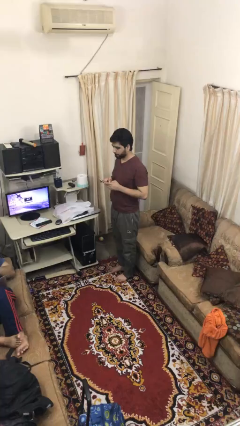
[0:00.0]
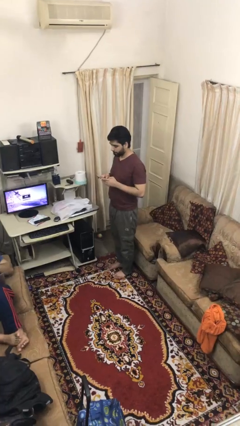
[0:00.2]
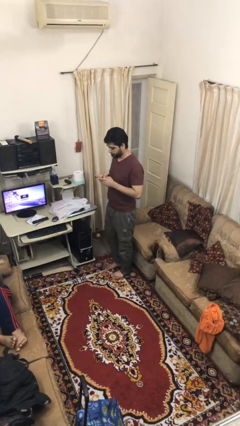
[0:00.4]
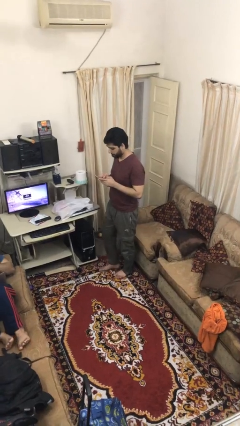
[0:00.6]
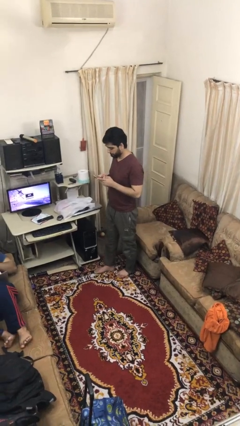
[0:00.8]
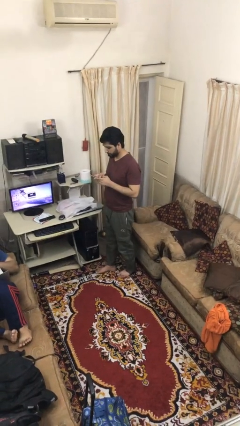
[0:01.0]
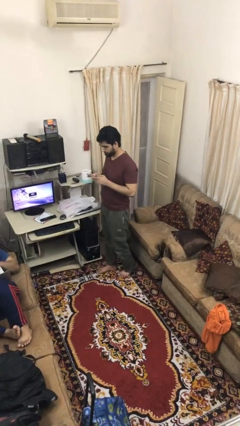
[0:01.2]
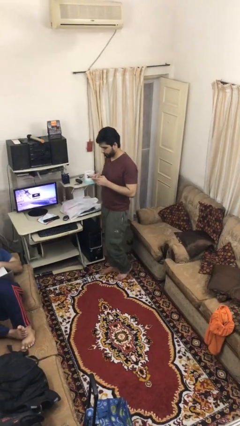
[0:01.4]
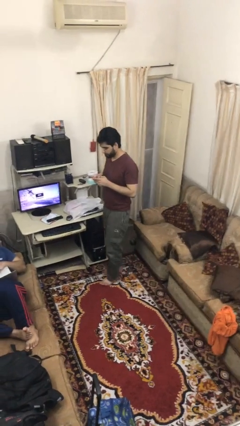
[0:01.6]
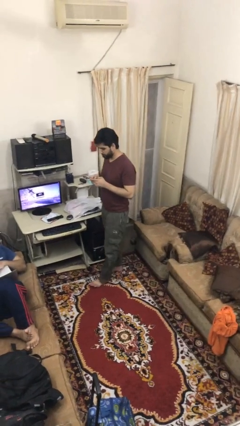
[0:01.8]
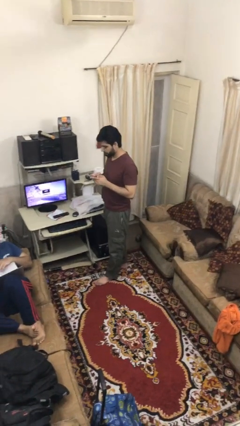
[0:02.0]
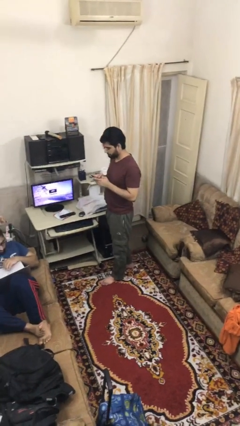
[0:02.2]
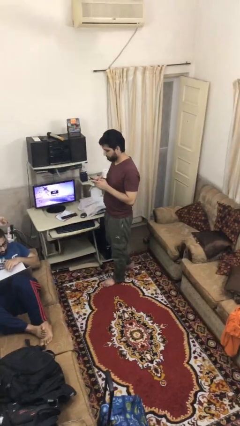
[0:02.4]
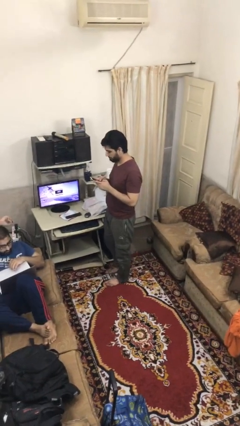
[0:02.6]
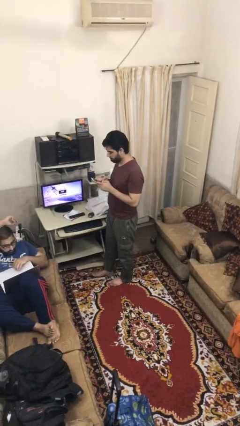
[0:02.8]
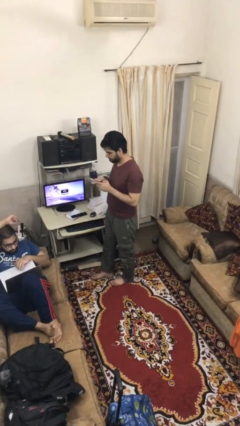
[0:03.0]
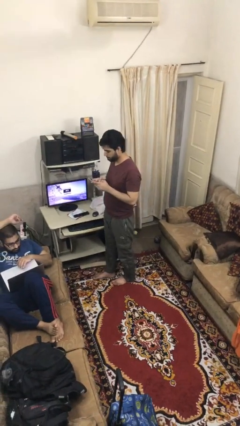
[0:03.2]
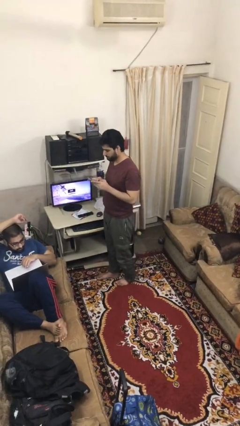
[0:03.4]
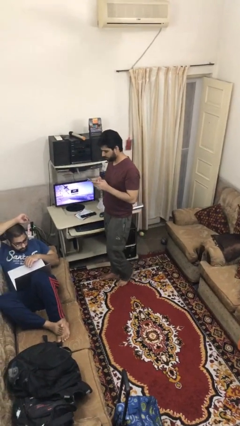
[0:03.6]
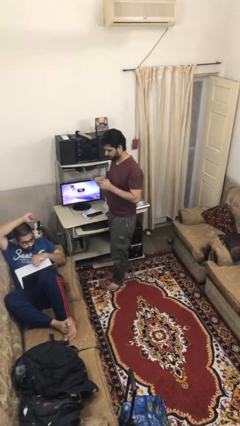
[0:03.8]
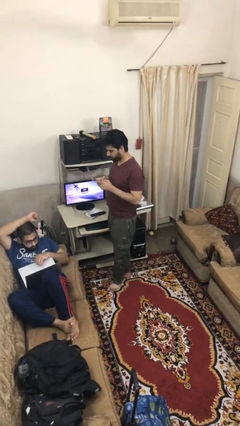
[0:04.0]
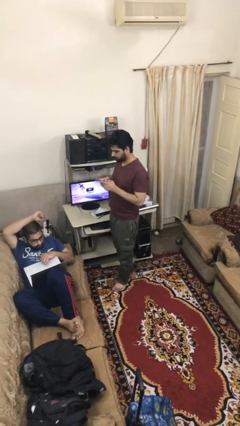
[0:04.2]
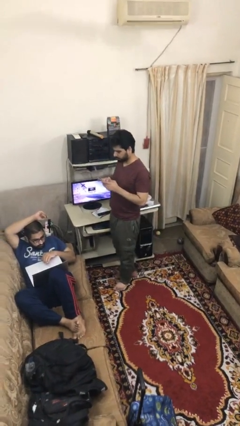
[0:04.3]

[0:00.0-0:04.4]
person texts on phone

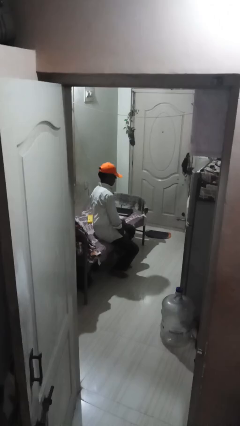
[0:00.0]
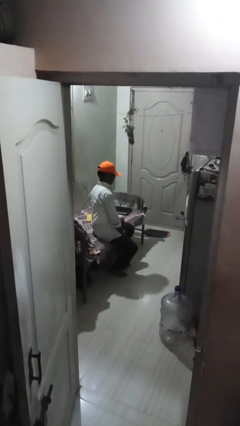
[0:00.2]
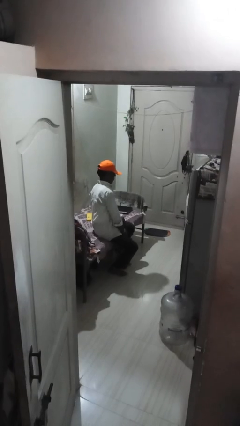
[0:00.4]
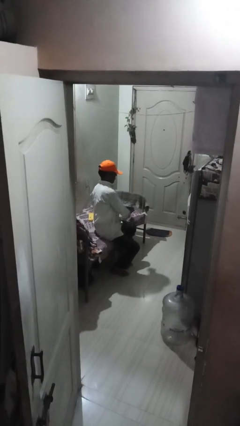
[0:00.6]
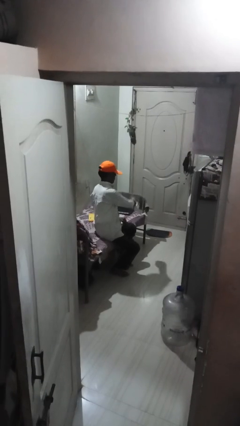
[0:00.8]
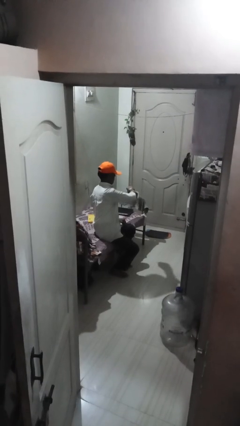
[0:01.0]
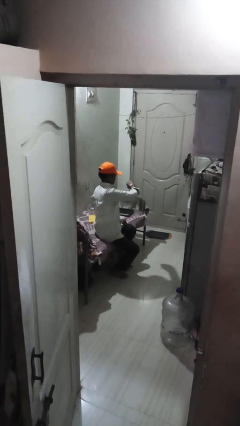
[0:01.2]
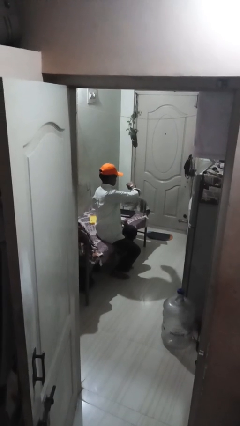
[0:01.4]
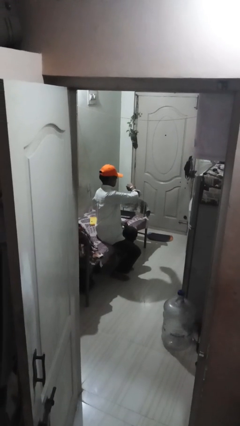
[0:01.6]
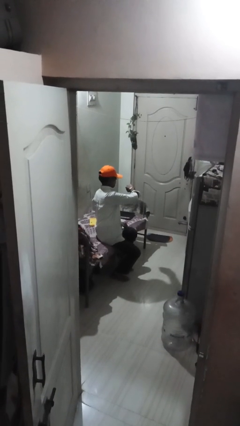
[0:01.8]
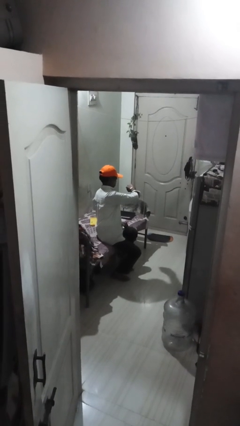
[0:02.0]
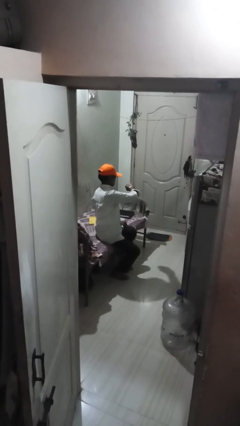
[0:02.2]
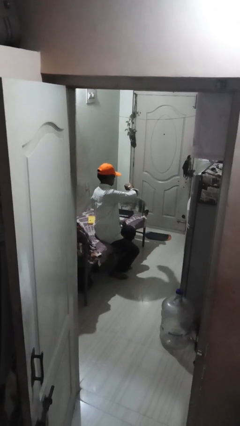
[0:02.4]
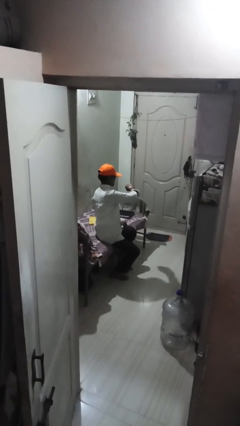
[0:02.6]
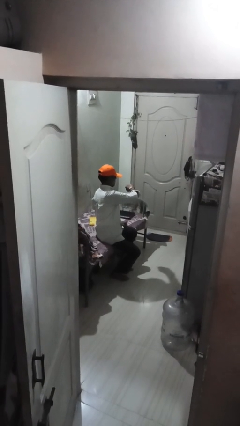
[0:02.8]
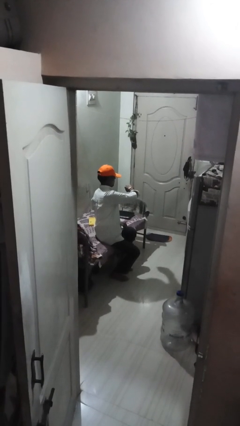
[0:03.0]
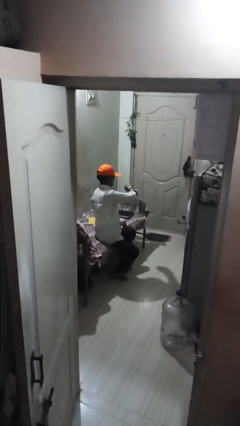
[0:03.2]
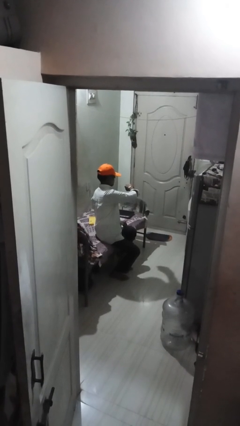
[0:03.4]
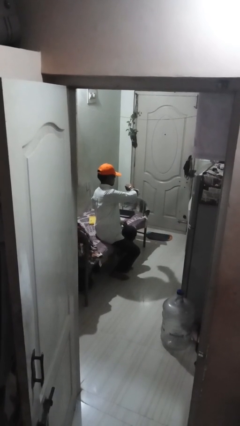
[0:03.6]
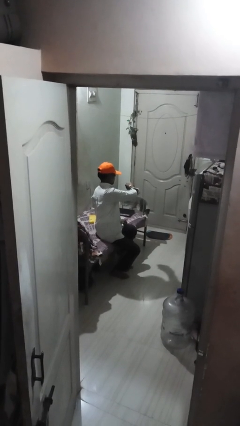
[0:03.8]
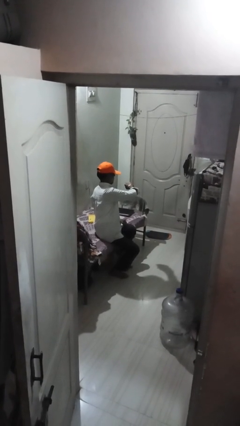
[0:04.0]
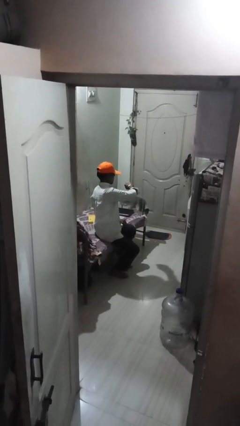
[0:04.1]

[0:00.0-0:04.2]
person looks at wristwatch

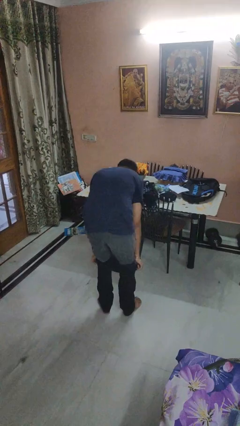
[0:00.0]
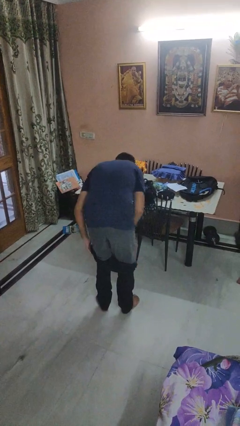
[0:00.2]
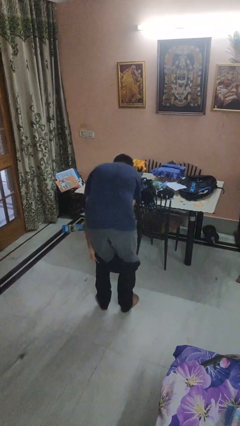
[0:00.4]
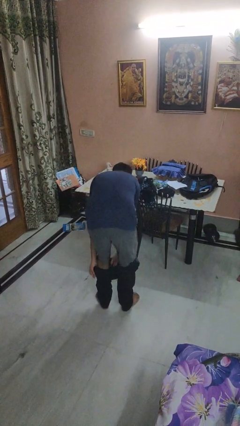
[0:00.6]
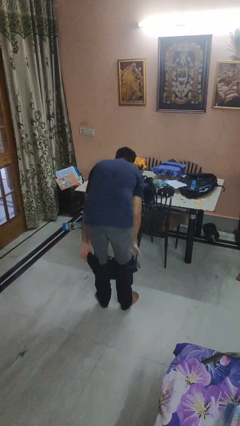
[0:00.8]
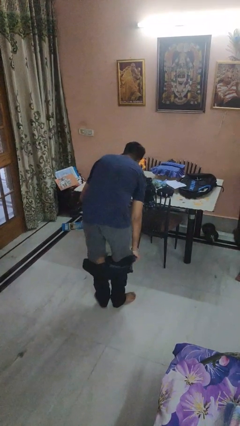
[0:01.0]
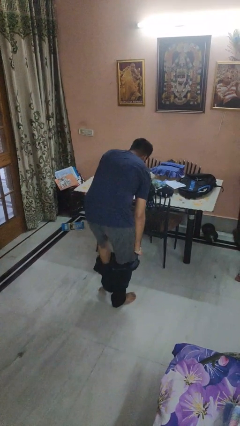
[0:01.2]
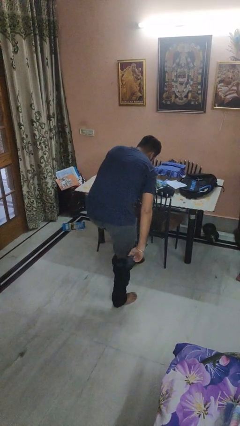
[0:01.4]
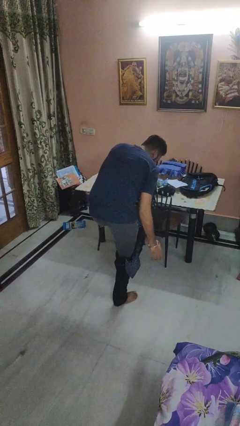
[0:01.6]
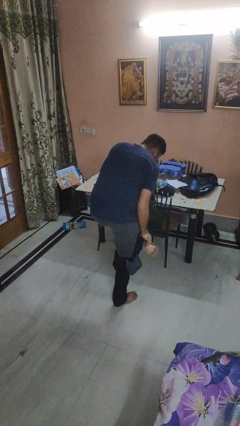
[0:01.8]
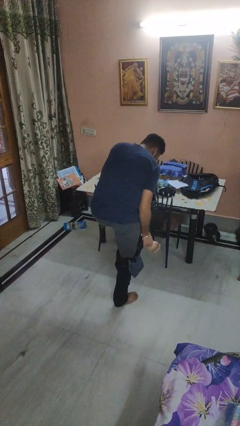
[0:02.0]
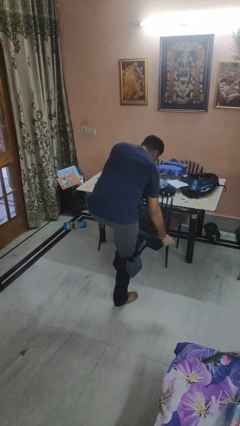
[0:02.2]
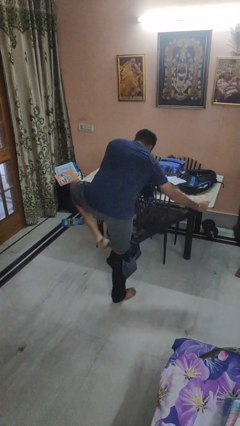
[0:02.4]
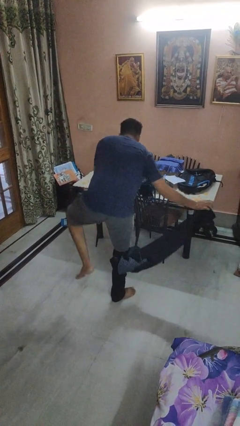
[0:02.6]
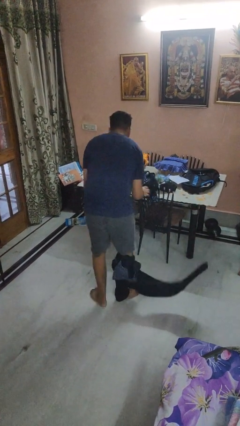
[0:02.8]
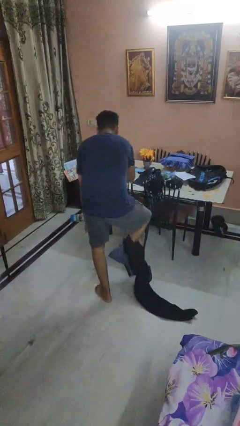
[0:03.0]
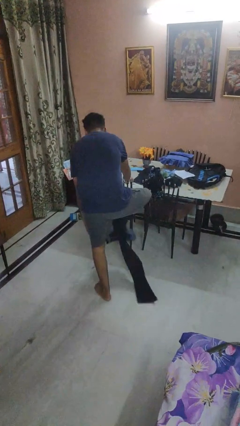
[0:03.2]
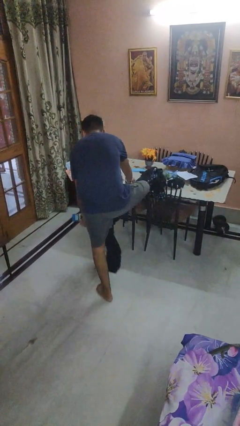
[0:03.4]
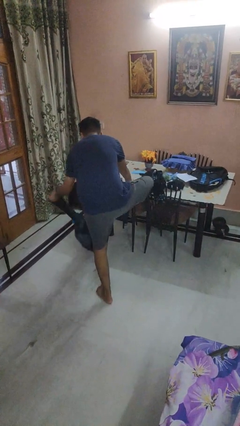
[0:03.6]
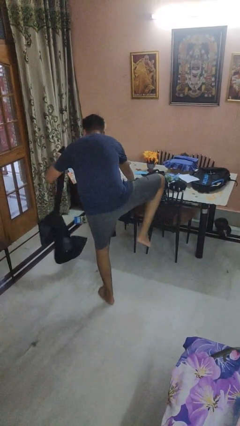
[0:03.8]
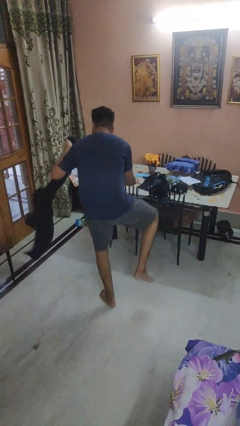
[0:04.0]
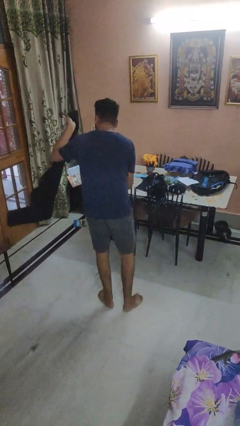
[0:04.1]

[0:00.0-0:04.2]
person takes off pants

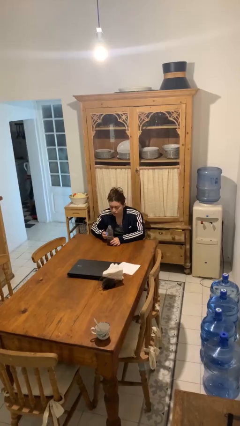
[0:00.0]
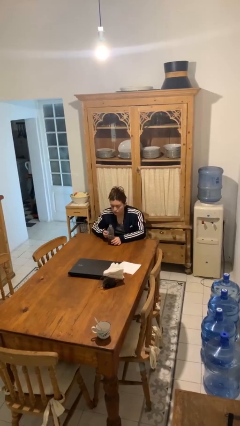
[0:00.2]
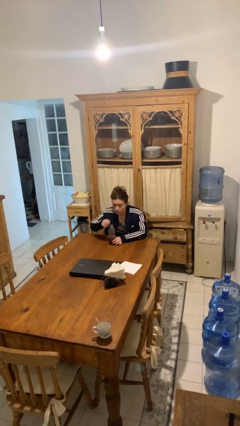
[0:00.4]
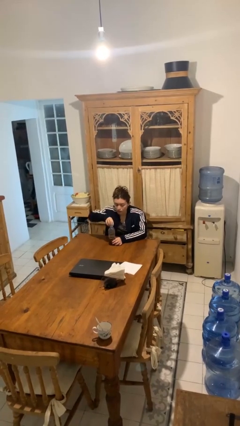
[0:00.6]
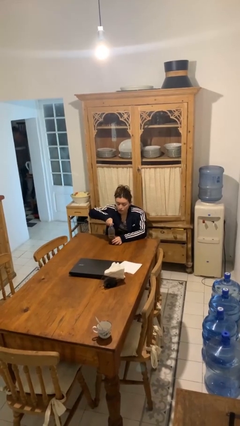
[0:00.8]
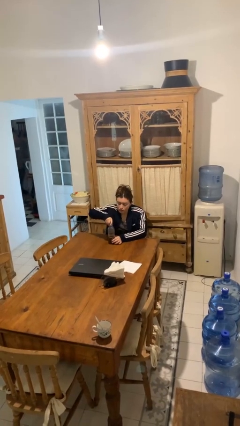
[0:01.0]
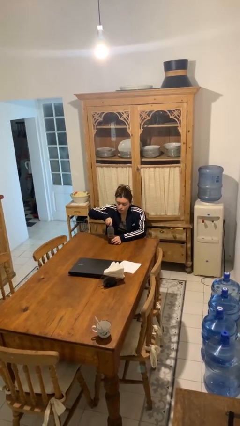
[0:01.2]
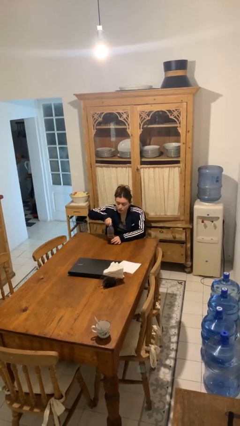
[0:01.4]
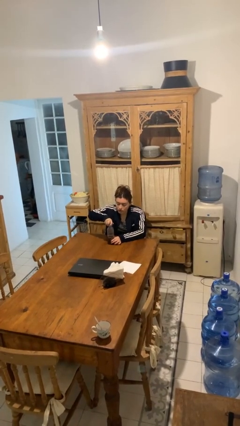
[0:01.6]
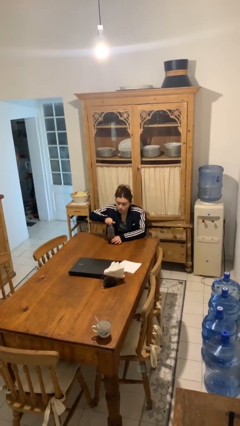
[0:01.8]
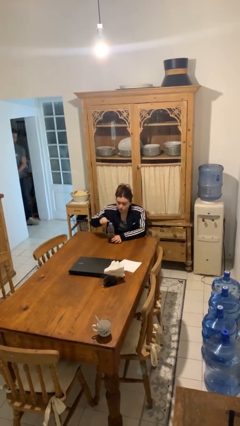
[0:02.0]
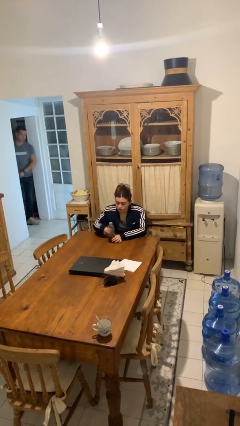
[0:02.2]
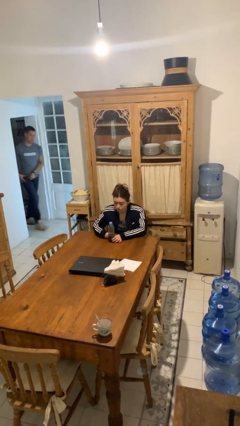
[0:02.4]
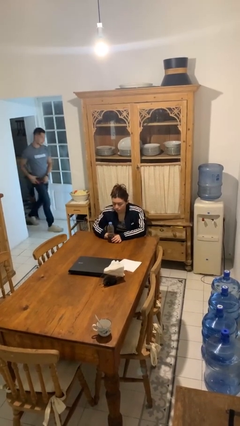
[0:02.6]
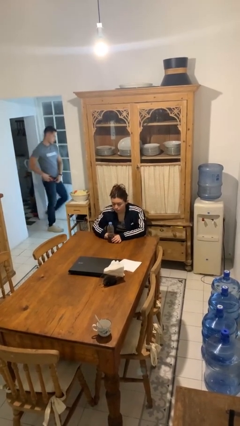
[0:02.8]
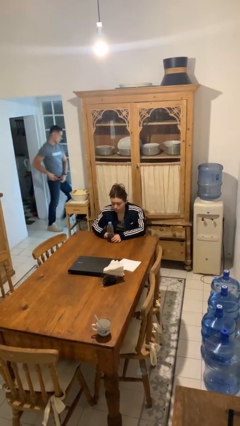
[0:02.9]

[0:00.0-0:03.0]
person screws lid to bottle

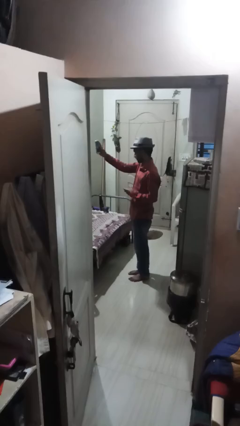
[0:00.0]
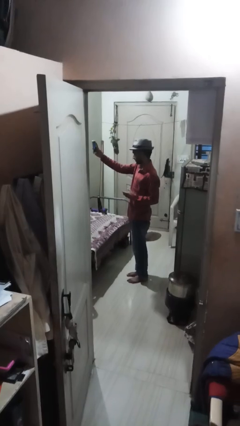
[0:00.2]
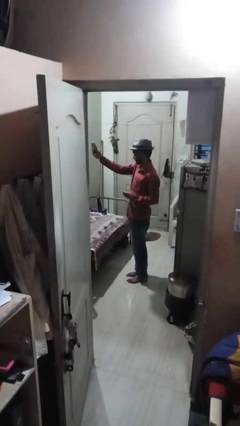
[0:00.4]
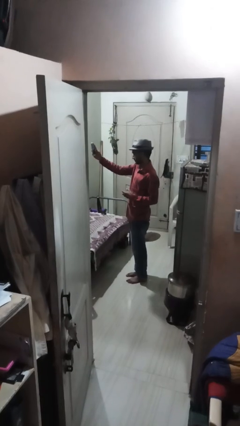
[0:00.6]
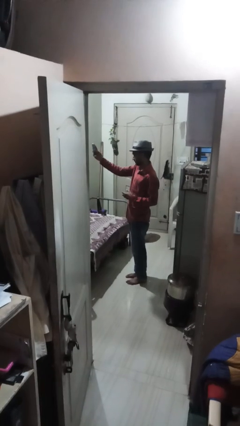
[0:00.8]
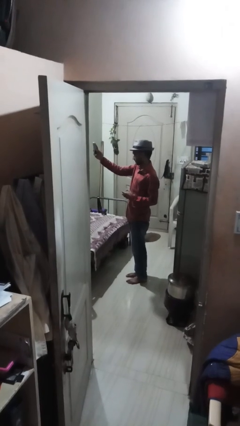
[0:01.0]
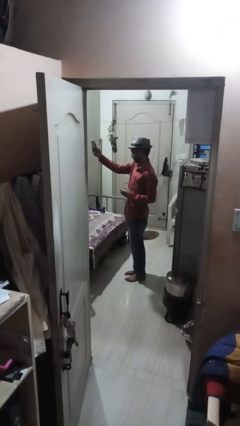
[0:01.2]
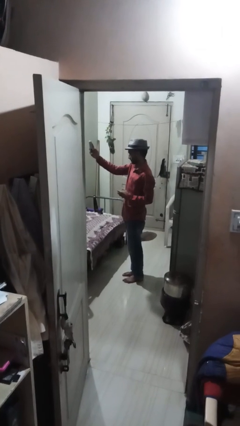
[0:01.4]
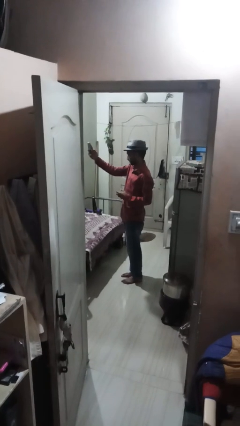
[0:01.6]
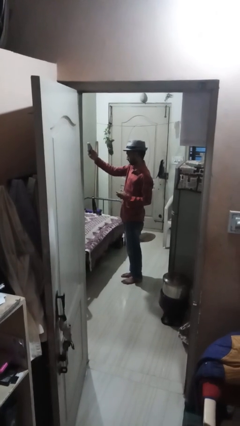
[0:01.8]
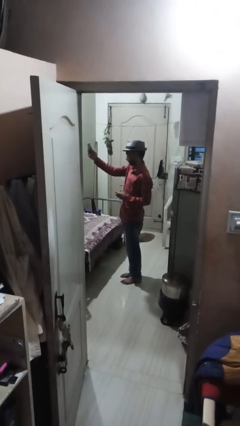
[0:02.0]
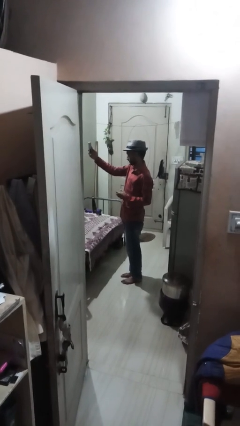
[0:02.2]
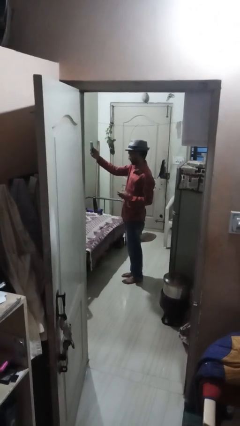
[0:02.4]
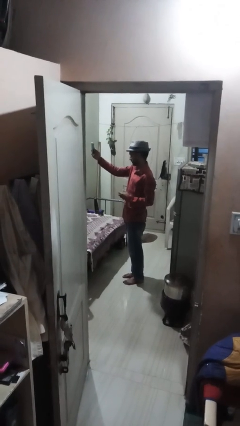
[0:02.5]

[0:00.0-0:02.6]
person takes selfie
